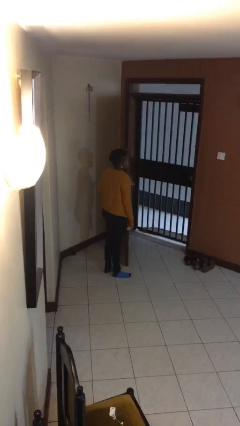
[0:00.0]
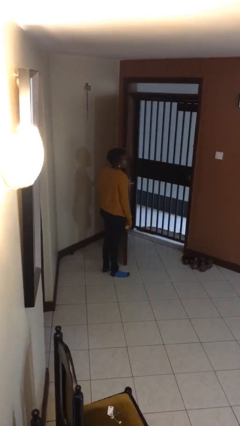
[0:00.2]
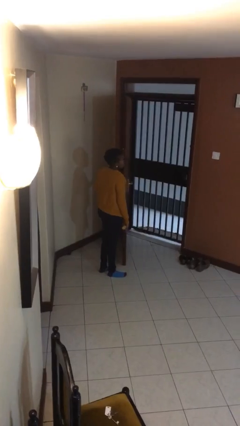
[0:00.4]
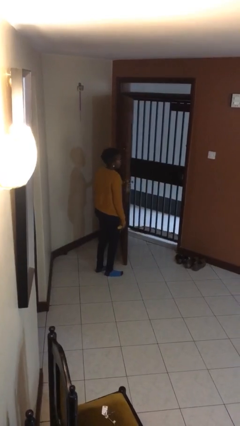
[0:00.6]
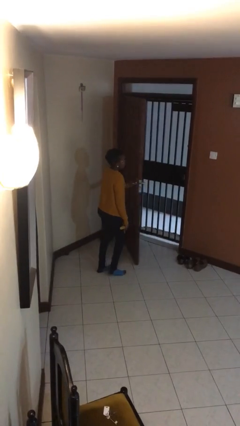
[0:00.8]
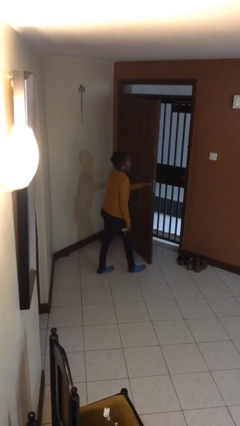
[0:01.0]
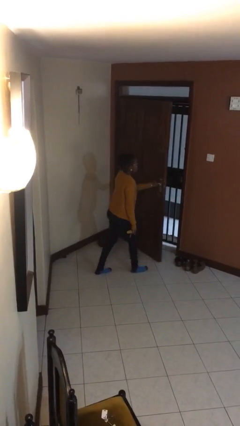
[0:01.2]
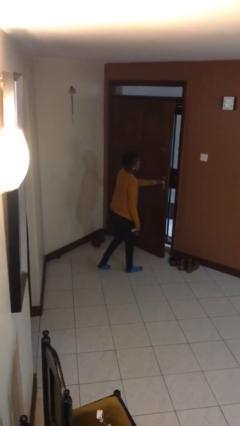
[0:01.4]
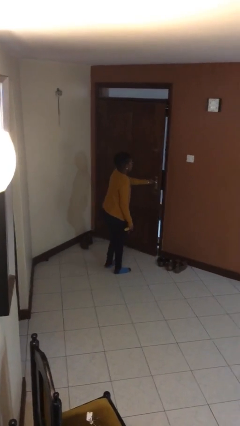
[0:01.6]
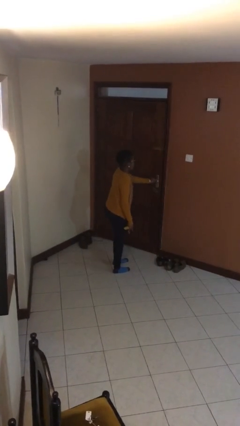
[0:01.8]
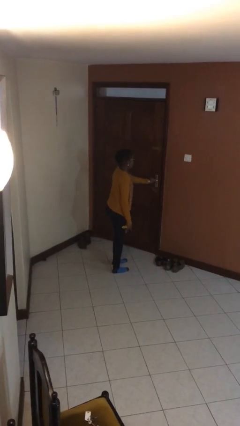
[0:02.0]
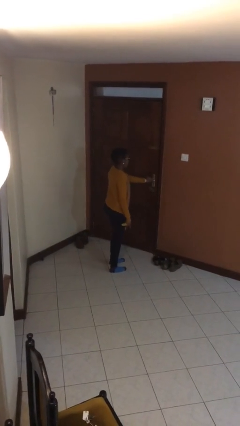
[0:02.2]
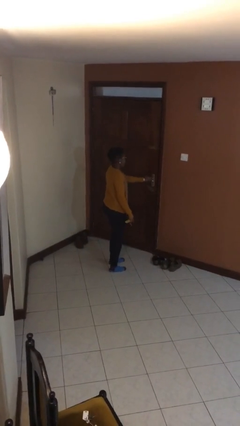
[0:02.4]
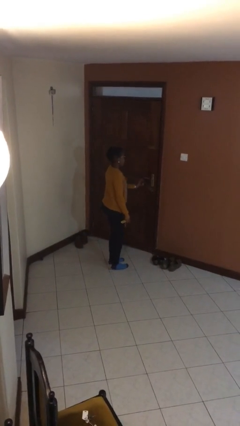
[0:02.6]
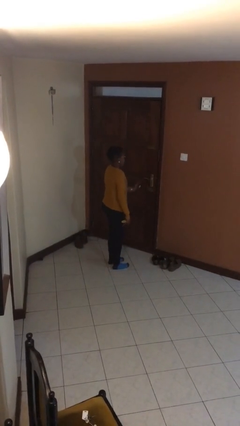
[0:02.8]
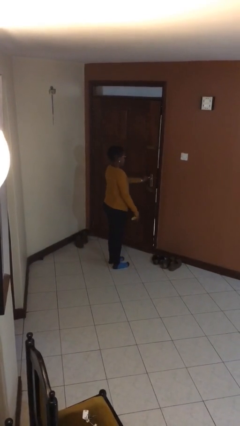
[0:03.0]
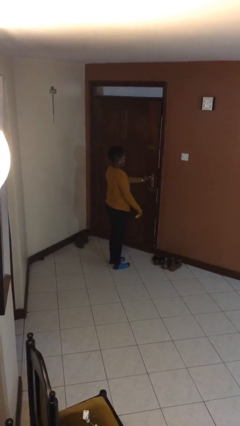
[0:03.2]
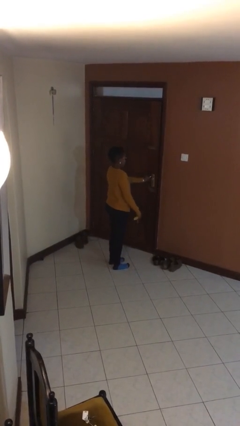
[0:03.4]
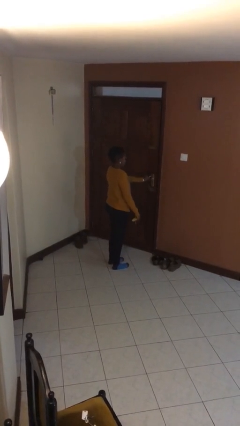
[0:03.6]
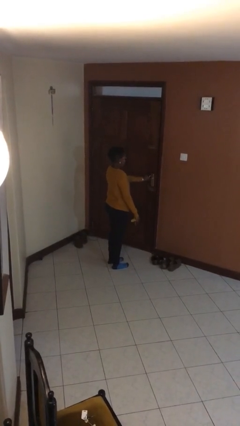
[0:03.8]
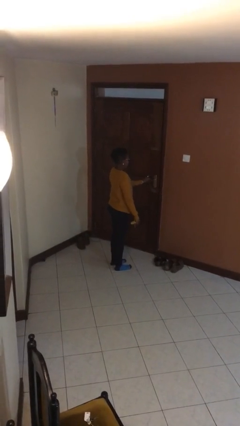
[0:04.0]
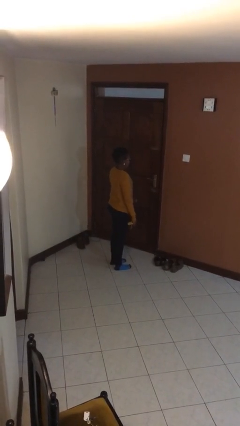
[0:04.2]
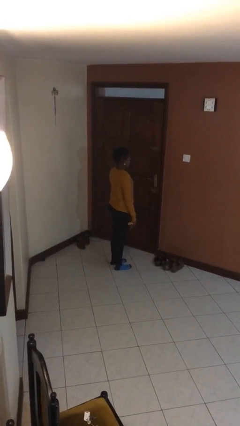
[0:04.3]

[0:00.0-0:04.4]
person closes facility door

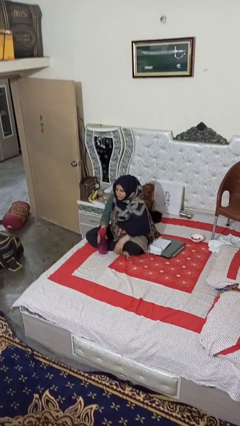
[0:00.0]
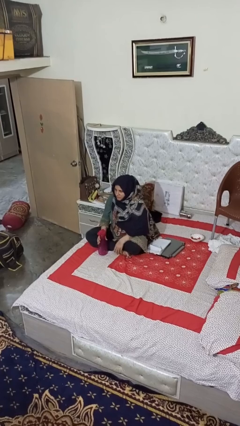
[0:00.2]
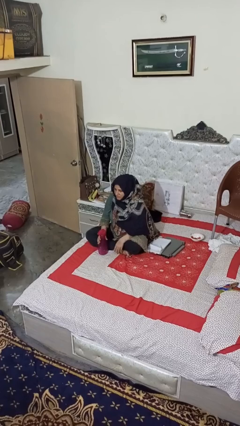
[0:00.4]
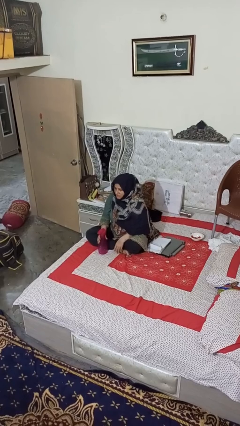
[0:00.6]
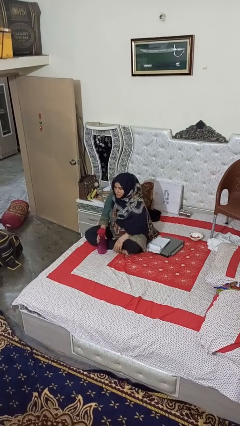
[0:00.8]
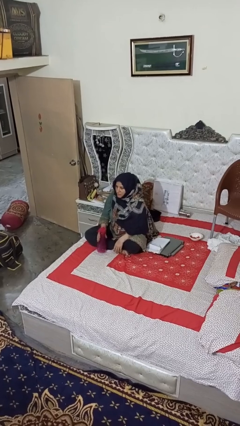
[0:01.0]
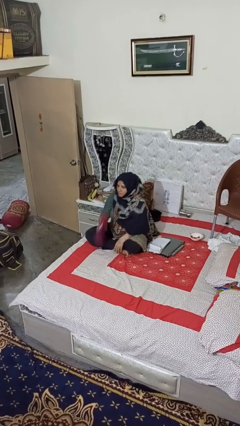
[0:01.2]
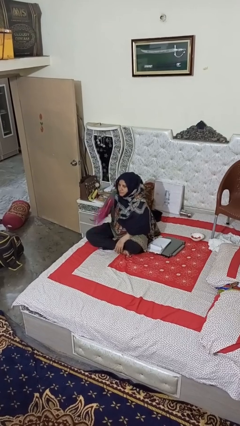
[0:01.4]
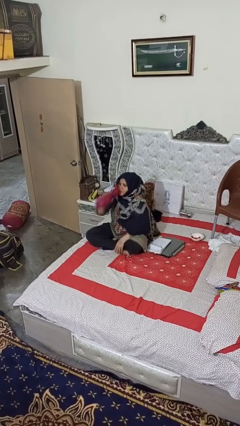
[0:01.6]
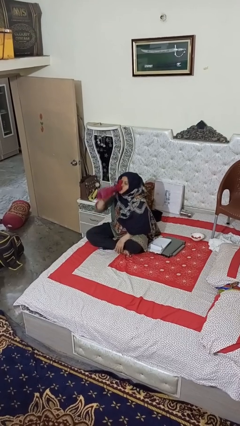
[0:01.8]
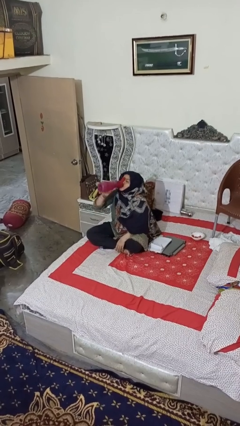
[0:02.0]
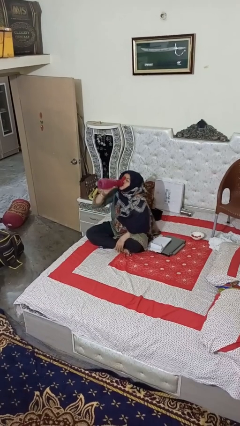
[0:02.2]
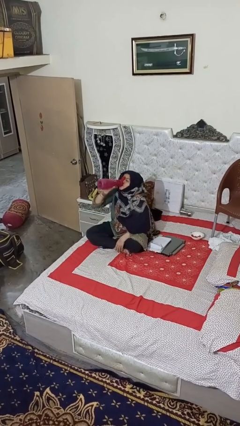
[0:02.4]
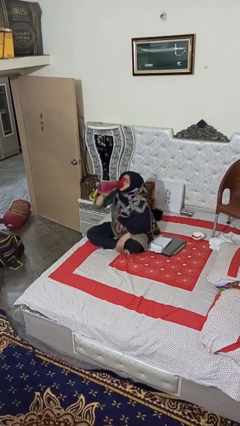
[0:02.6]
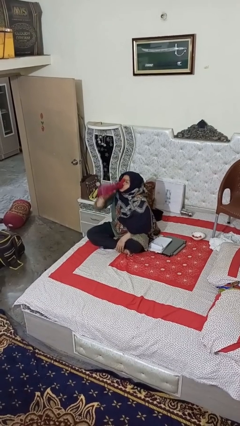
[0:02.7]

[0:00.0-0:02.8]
person drinks from bottle

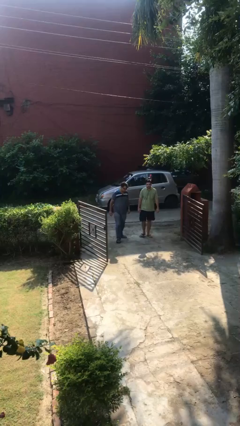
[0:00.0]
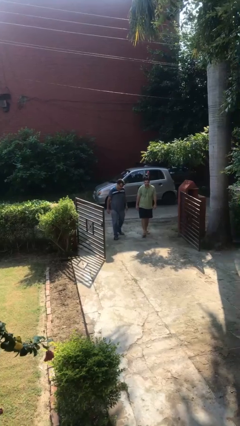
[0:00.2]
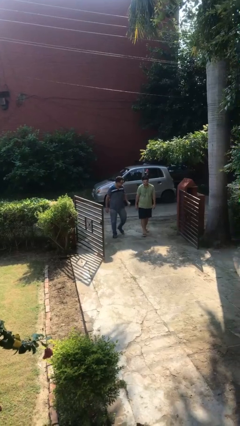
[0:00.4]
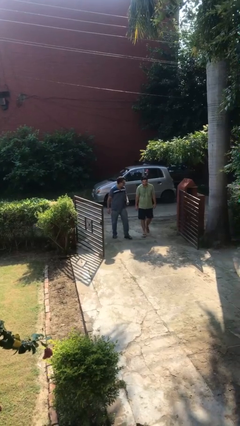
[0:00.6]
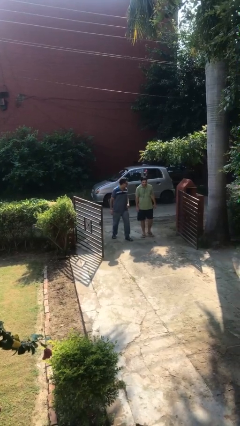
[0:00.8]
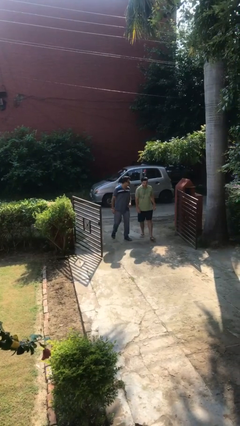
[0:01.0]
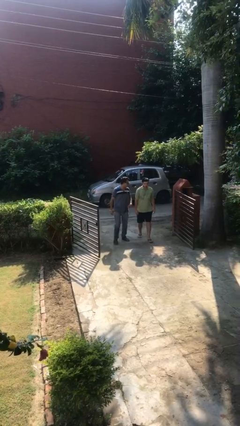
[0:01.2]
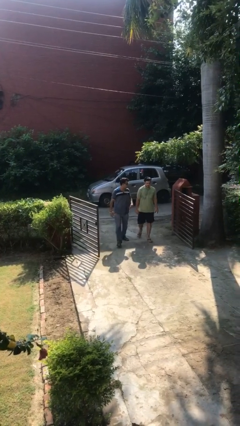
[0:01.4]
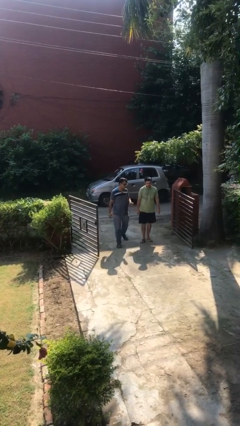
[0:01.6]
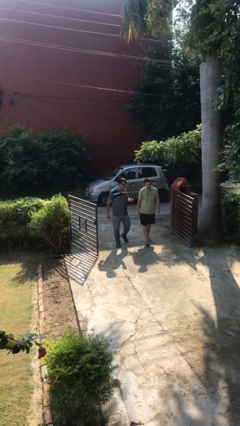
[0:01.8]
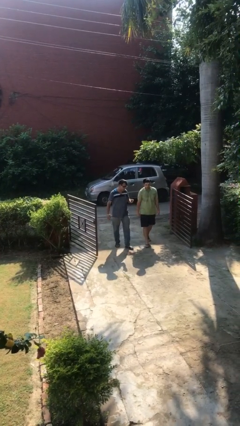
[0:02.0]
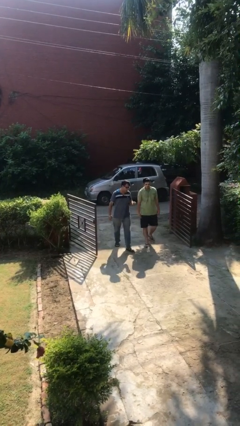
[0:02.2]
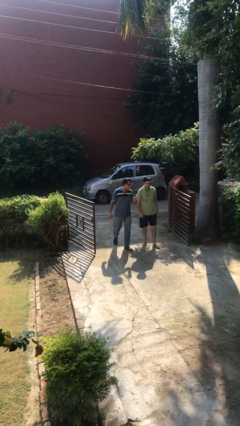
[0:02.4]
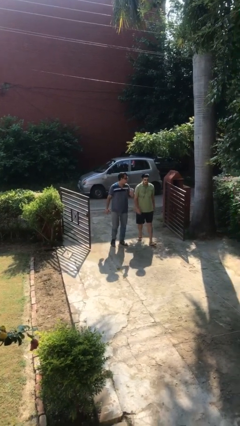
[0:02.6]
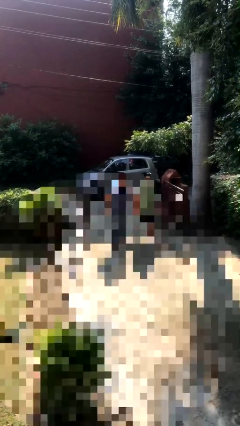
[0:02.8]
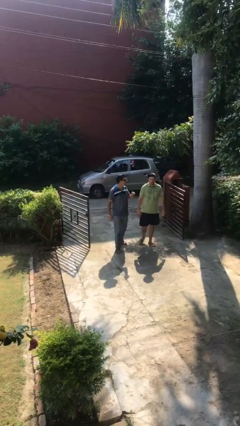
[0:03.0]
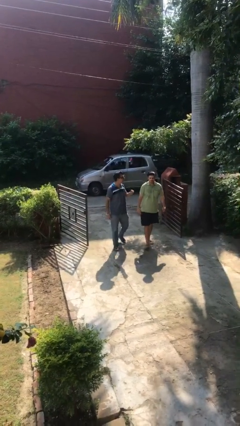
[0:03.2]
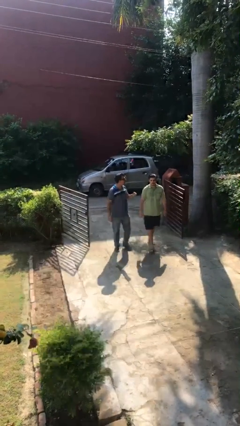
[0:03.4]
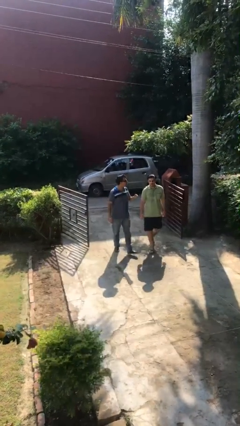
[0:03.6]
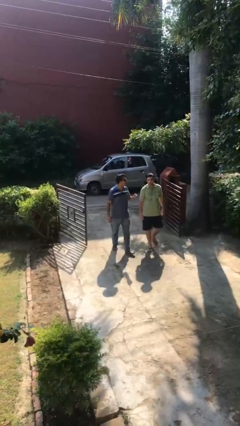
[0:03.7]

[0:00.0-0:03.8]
person talks to person

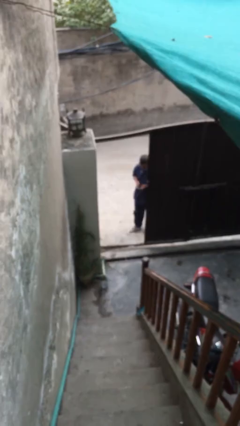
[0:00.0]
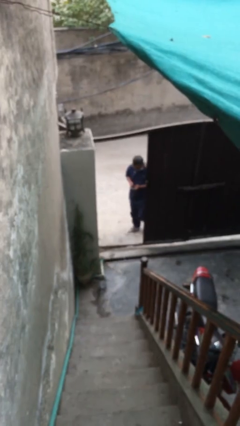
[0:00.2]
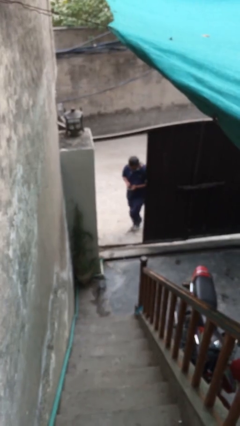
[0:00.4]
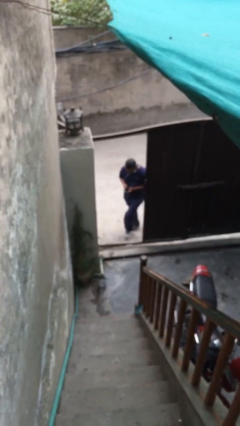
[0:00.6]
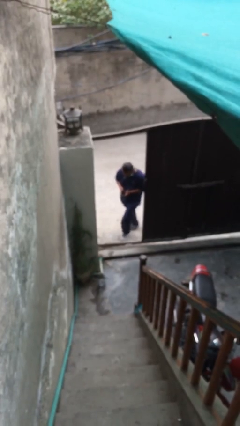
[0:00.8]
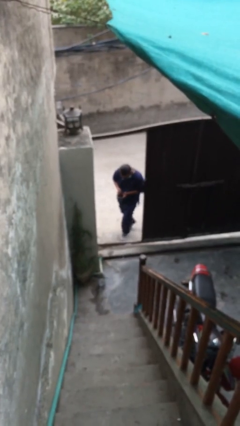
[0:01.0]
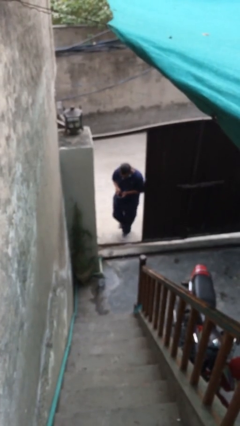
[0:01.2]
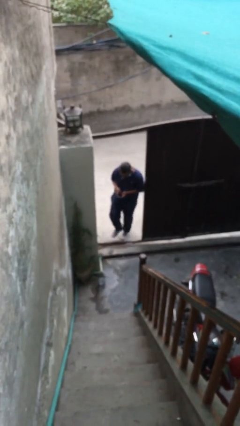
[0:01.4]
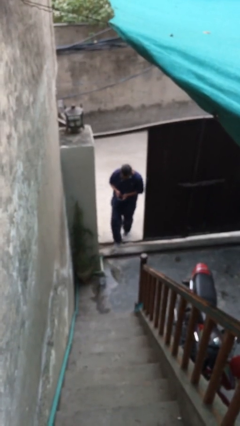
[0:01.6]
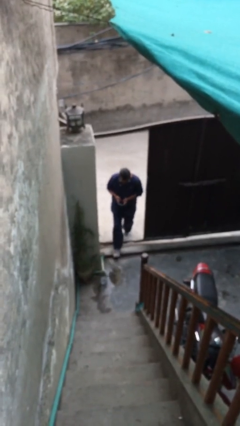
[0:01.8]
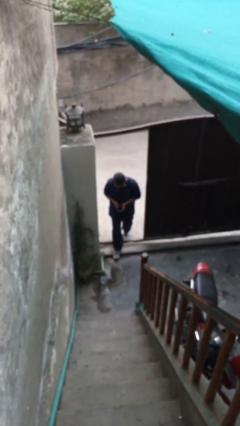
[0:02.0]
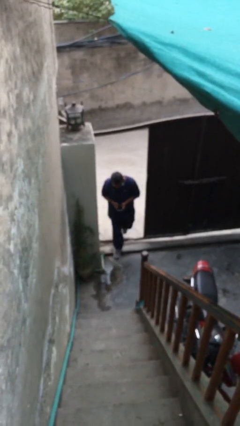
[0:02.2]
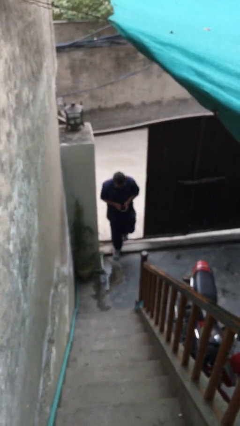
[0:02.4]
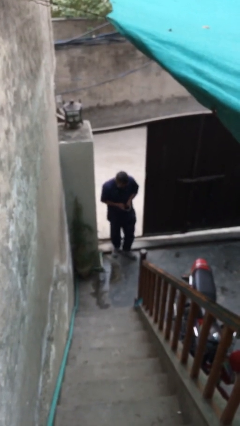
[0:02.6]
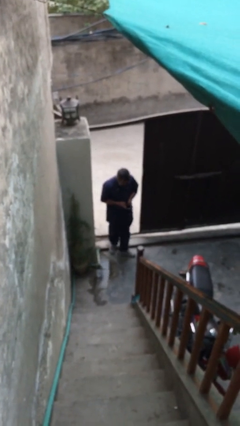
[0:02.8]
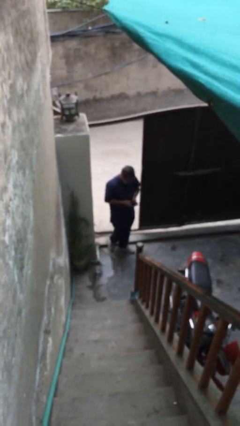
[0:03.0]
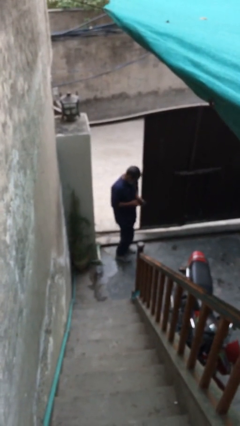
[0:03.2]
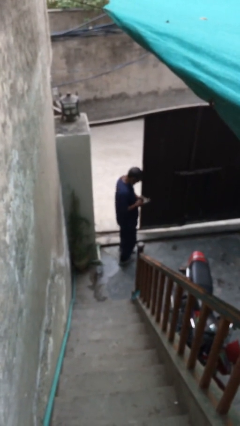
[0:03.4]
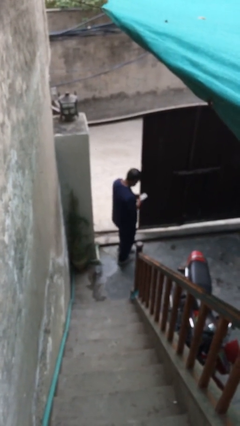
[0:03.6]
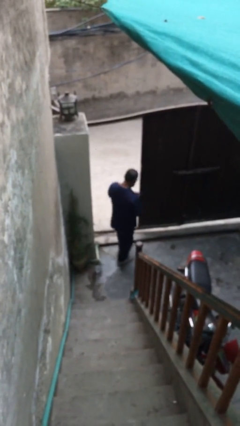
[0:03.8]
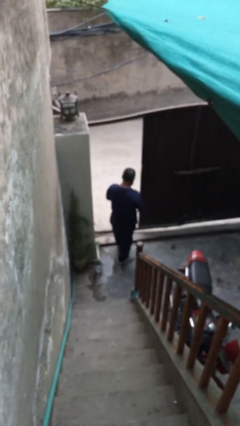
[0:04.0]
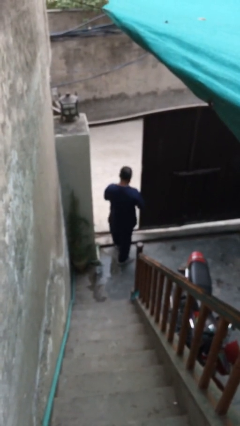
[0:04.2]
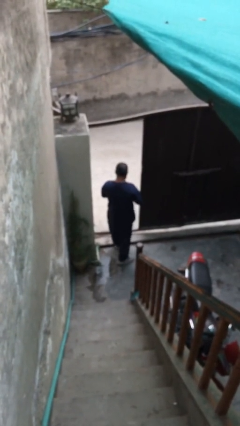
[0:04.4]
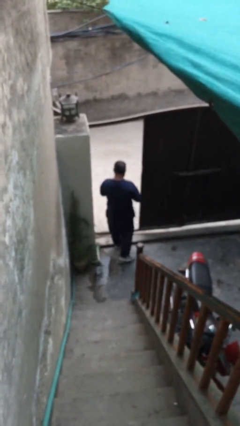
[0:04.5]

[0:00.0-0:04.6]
person enters scene through structure

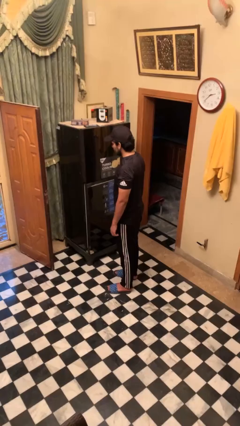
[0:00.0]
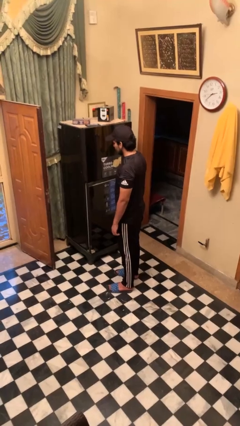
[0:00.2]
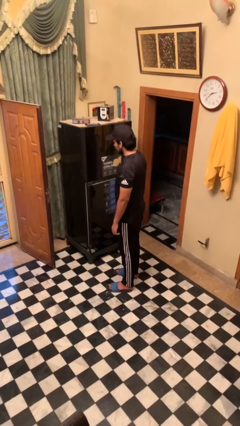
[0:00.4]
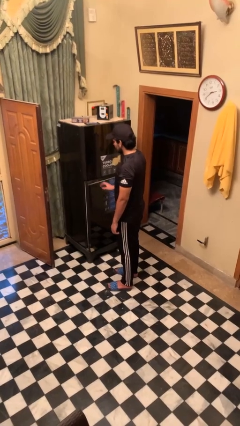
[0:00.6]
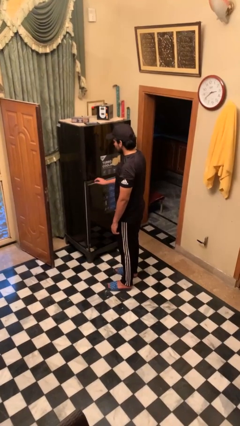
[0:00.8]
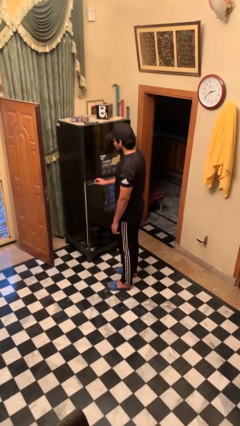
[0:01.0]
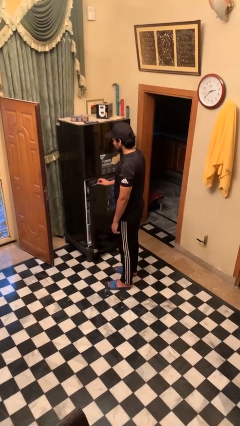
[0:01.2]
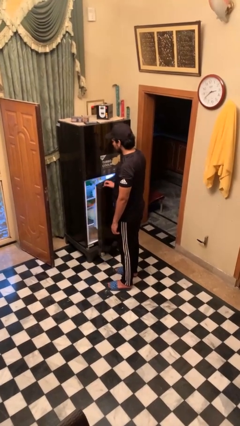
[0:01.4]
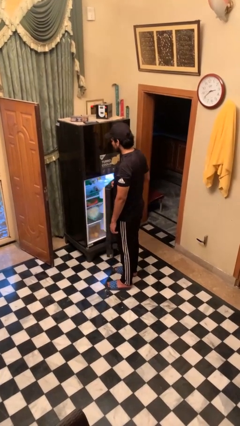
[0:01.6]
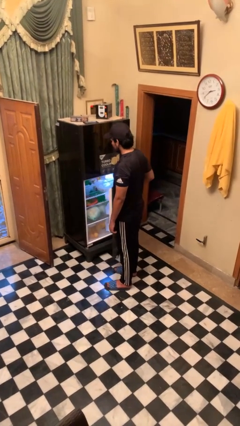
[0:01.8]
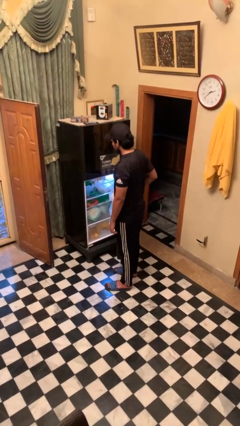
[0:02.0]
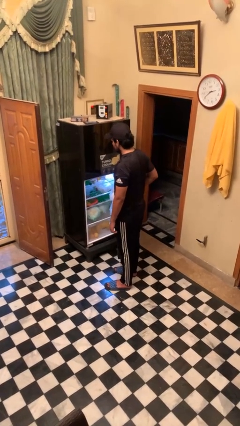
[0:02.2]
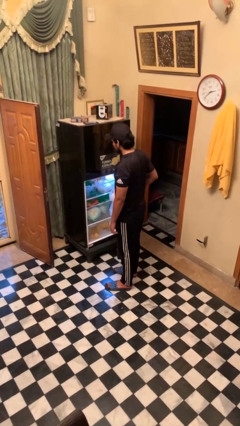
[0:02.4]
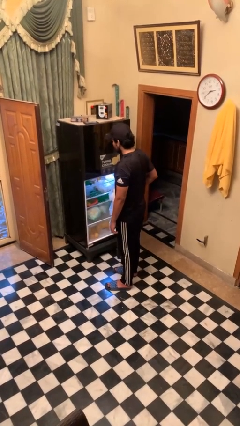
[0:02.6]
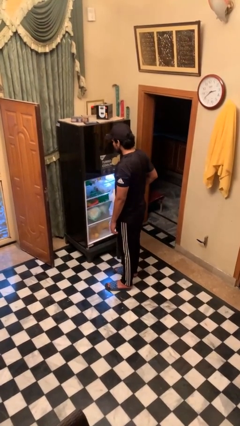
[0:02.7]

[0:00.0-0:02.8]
person opens refrigerator
